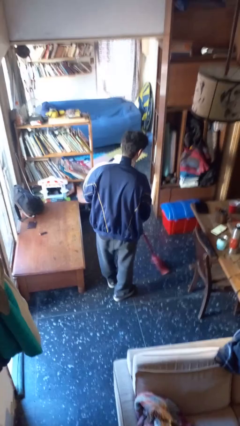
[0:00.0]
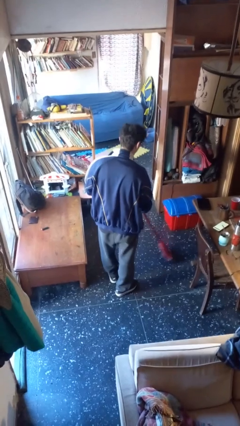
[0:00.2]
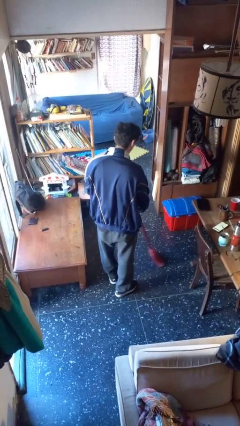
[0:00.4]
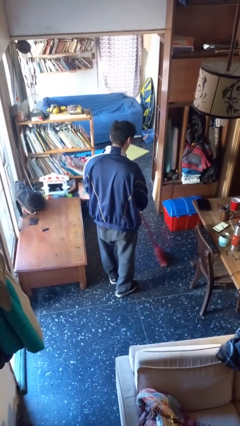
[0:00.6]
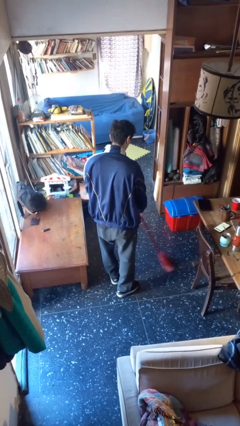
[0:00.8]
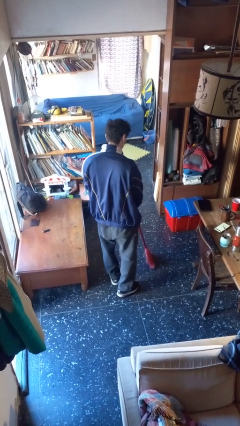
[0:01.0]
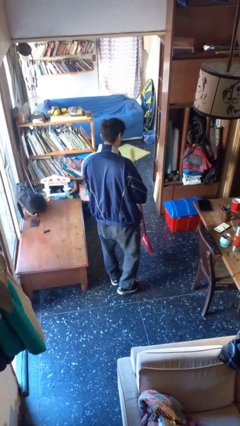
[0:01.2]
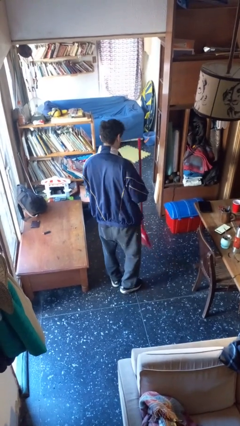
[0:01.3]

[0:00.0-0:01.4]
person sweeps floor

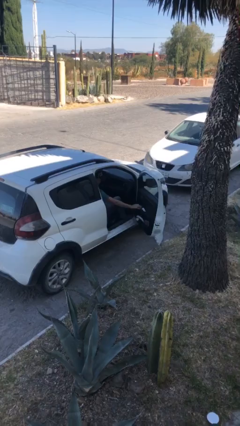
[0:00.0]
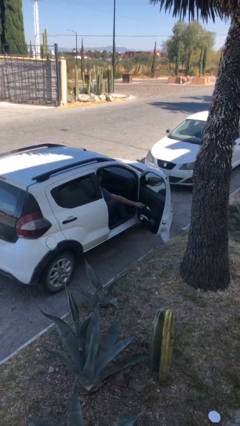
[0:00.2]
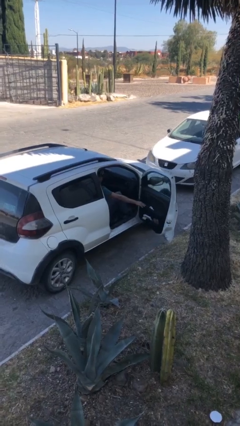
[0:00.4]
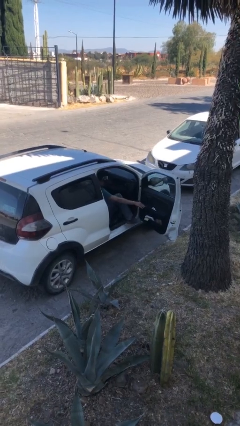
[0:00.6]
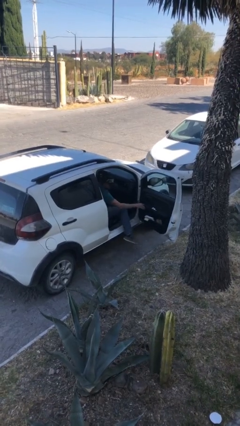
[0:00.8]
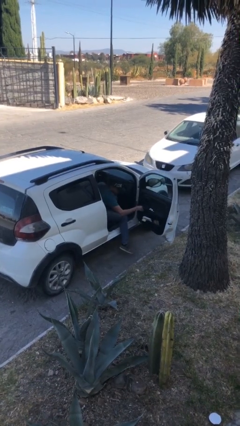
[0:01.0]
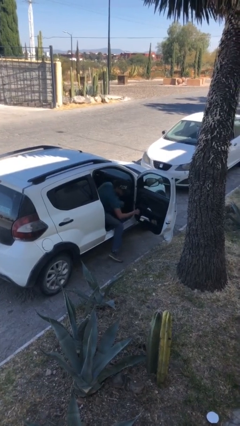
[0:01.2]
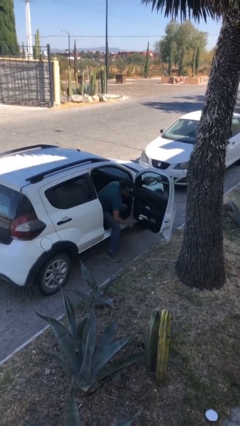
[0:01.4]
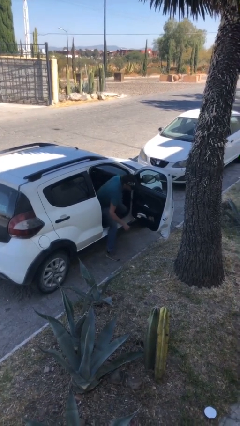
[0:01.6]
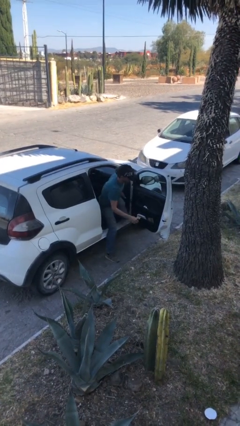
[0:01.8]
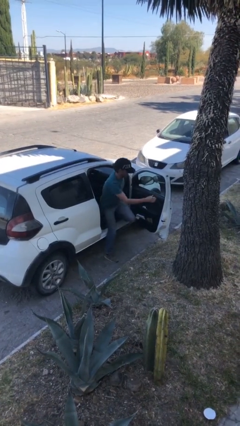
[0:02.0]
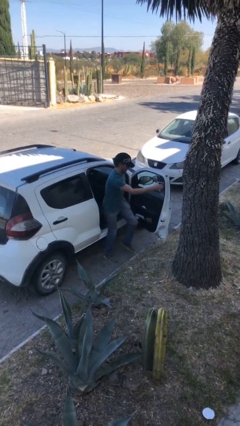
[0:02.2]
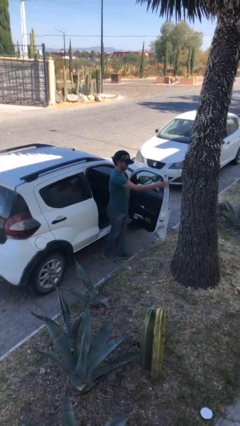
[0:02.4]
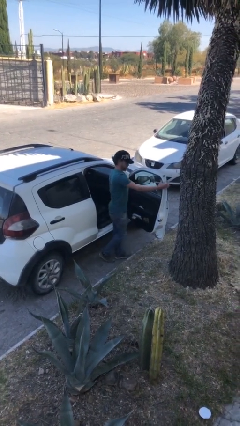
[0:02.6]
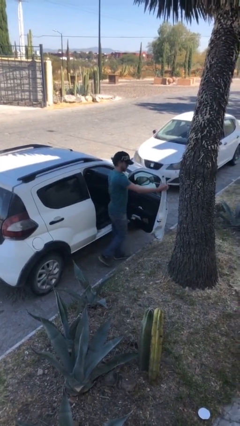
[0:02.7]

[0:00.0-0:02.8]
person exits car

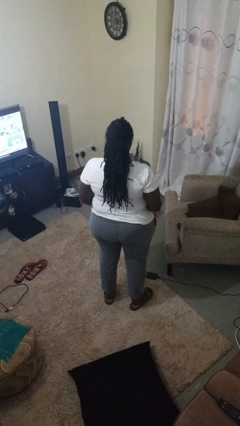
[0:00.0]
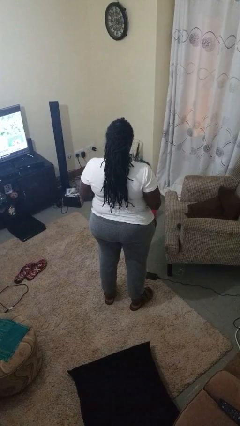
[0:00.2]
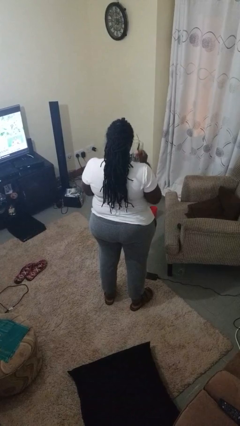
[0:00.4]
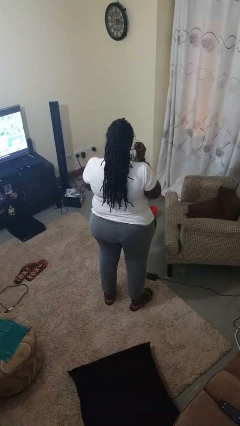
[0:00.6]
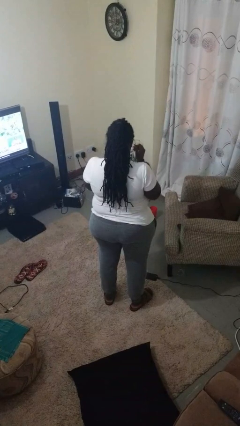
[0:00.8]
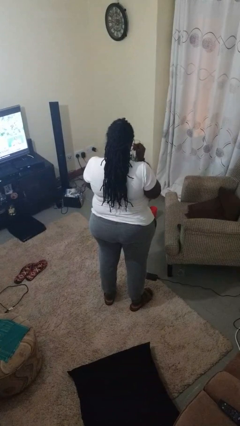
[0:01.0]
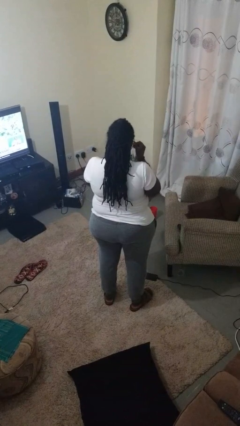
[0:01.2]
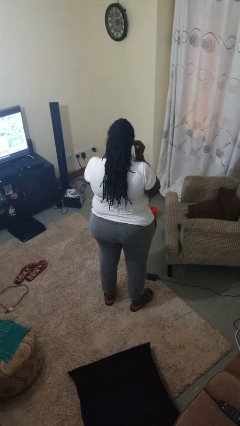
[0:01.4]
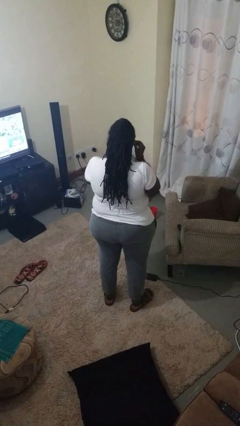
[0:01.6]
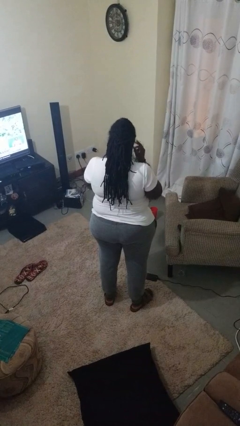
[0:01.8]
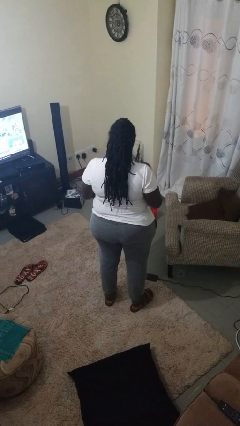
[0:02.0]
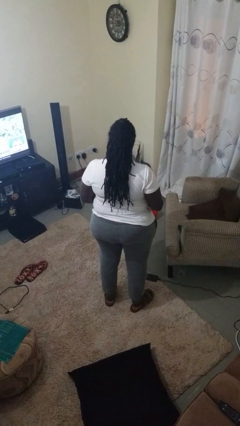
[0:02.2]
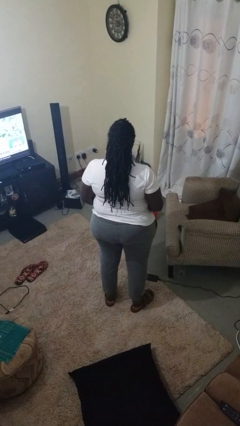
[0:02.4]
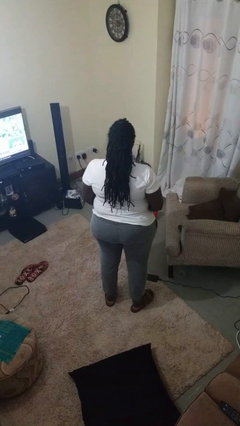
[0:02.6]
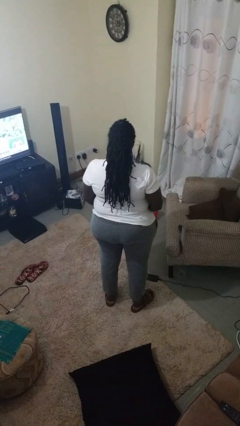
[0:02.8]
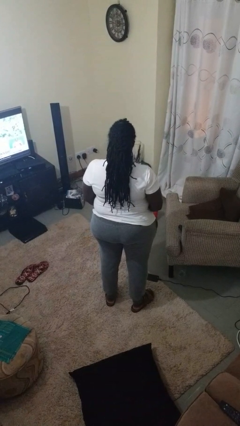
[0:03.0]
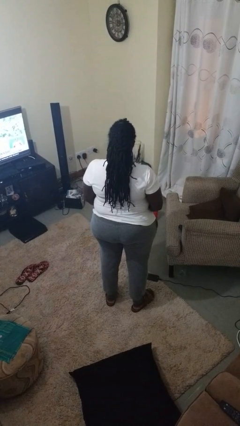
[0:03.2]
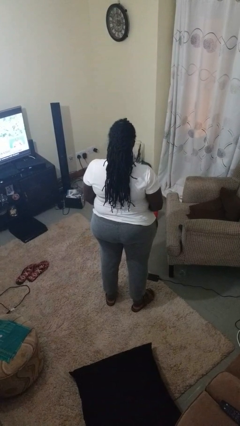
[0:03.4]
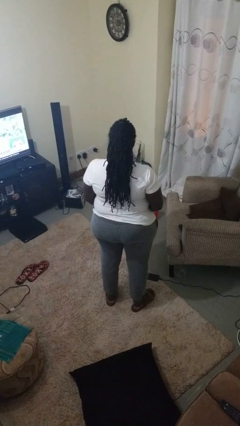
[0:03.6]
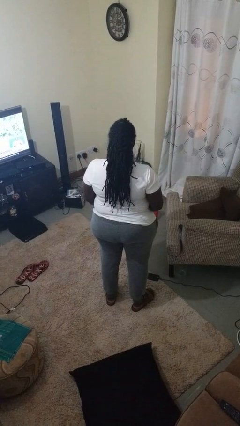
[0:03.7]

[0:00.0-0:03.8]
person puts on sunglasses

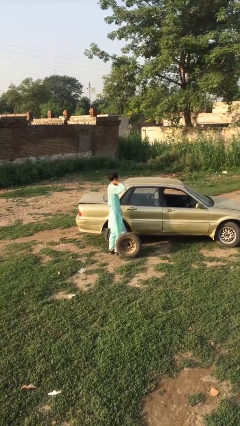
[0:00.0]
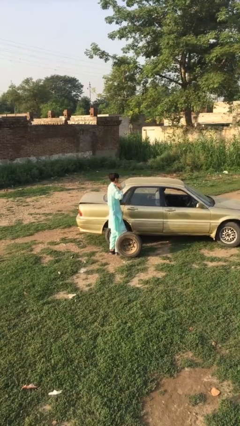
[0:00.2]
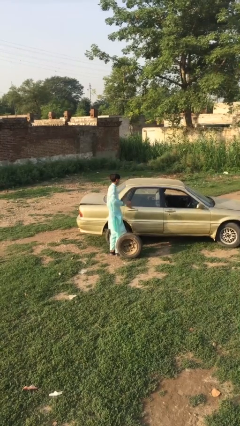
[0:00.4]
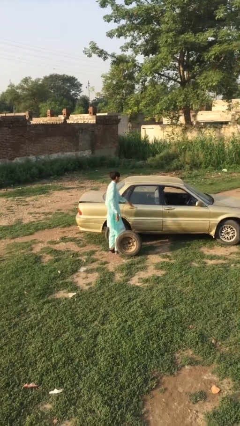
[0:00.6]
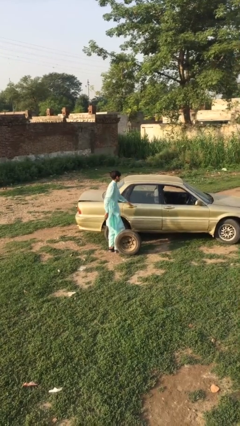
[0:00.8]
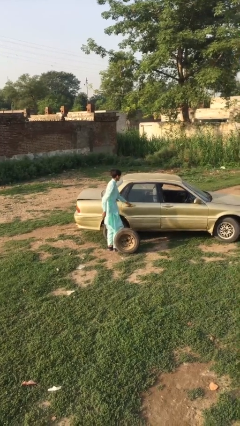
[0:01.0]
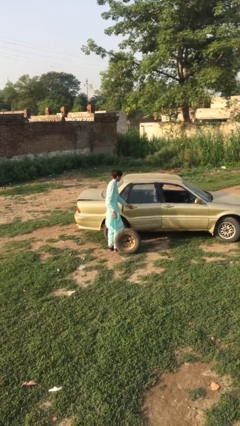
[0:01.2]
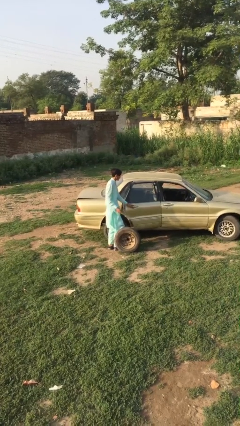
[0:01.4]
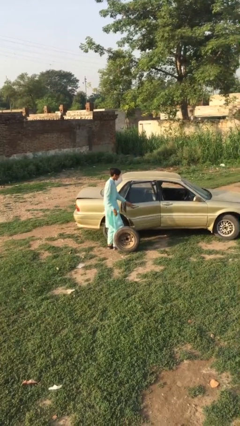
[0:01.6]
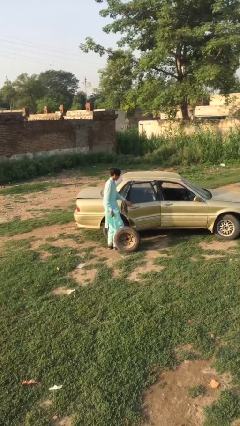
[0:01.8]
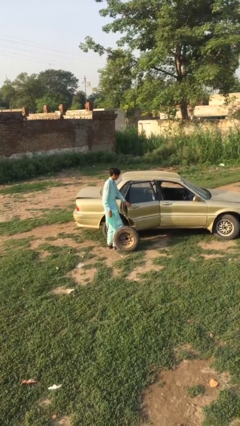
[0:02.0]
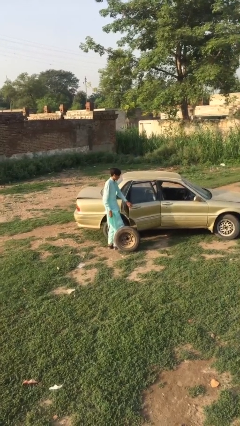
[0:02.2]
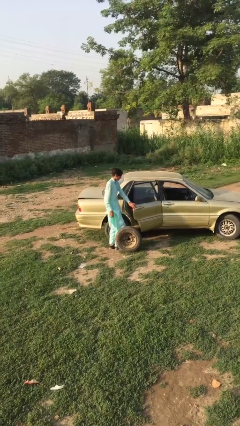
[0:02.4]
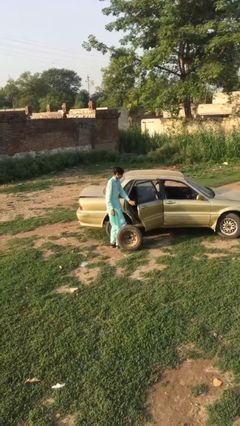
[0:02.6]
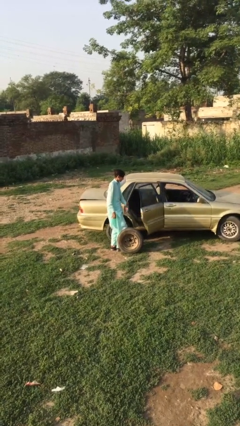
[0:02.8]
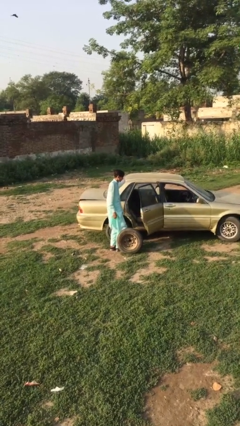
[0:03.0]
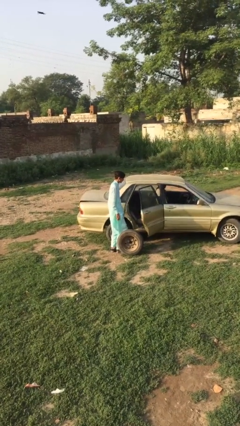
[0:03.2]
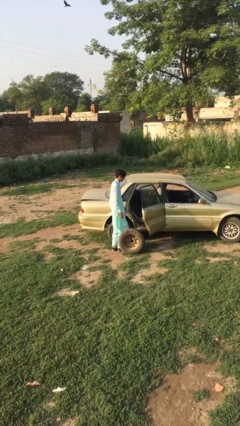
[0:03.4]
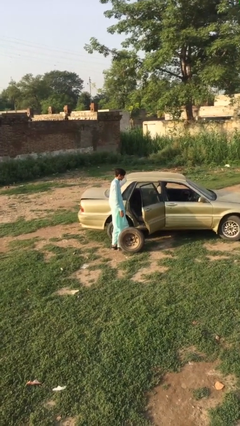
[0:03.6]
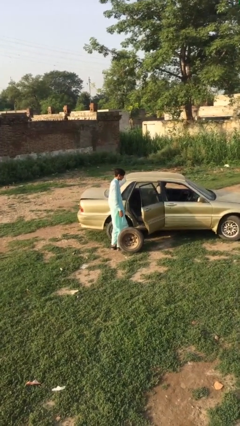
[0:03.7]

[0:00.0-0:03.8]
person opens car door

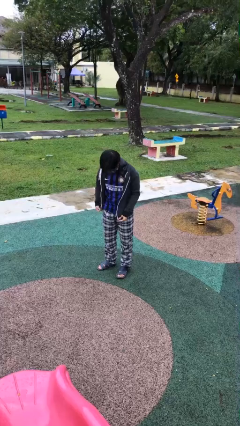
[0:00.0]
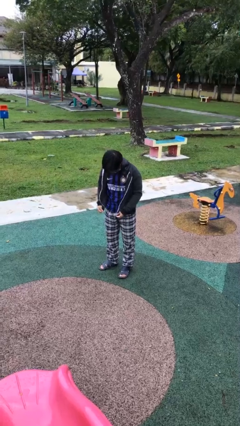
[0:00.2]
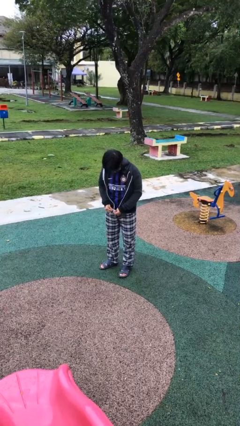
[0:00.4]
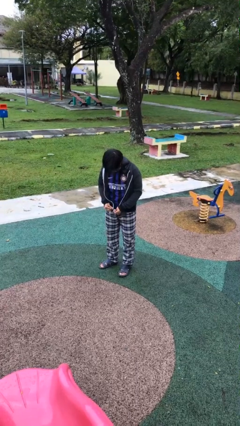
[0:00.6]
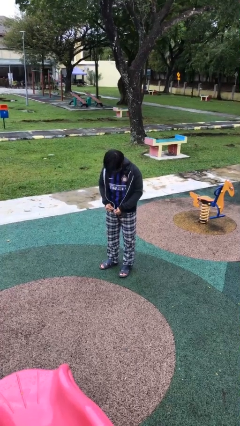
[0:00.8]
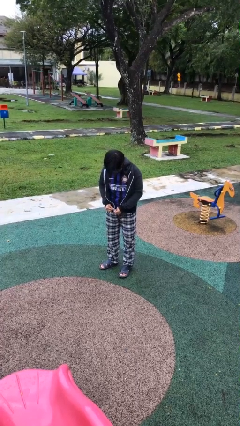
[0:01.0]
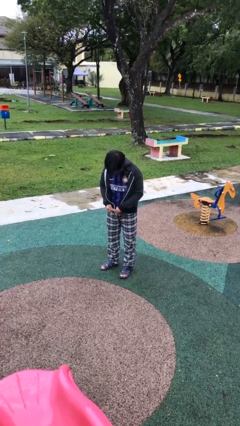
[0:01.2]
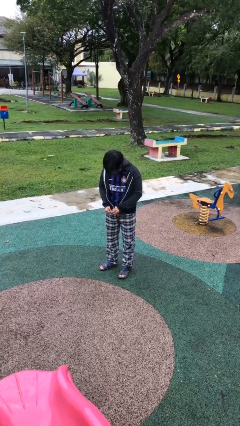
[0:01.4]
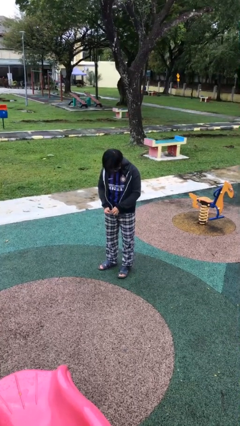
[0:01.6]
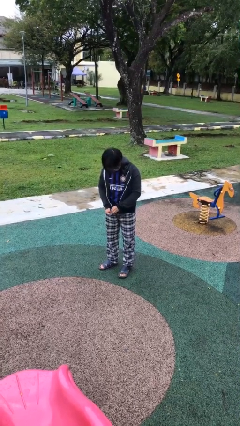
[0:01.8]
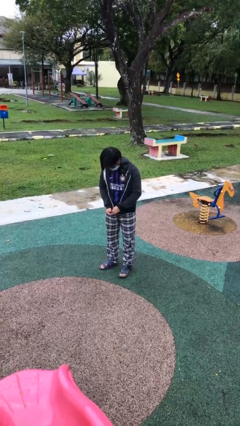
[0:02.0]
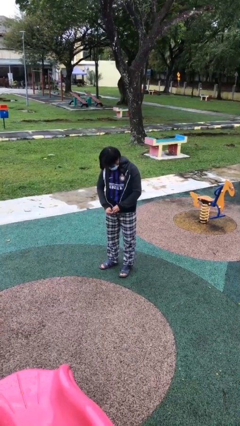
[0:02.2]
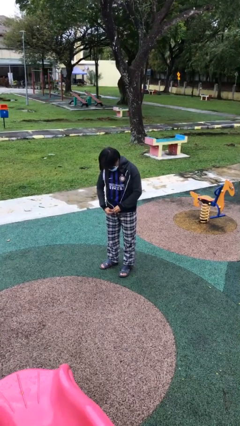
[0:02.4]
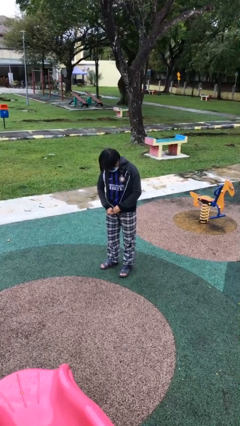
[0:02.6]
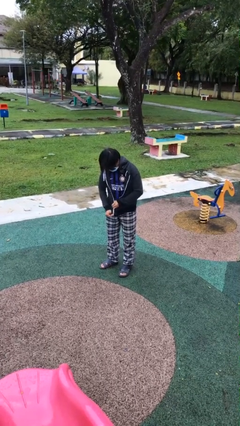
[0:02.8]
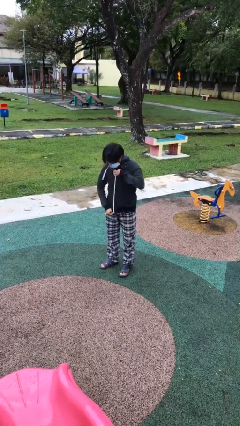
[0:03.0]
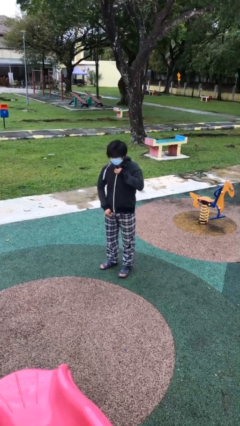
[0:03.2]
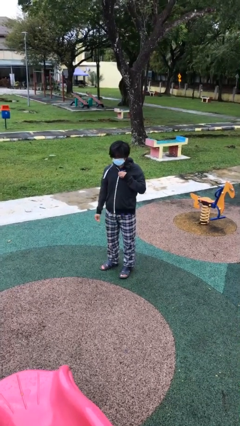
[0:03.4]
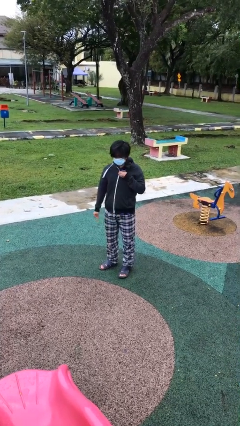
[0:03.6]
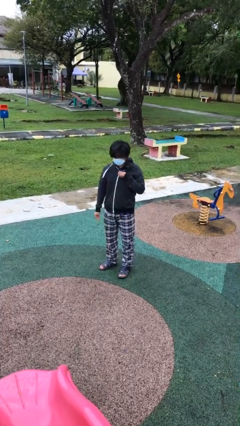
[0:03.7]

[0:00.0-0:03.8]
person zips up jacket

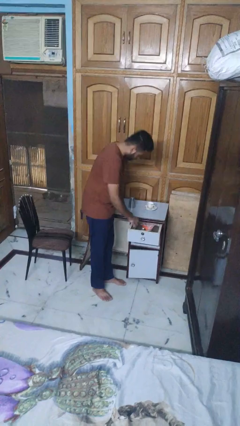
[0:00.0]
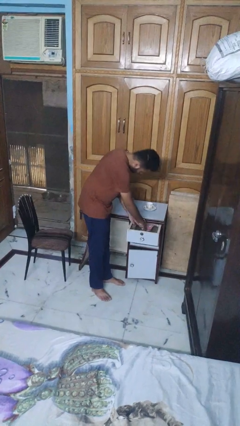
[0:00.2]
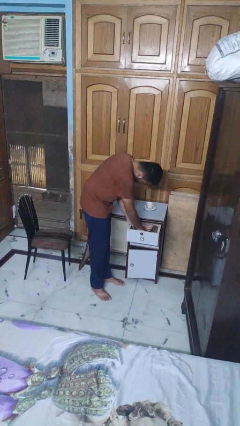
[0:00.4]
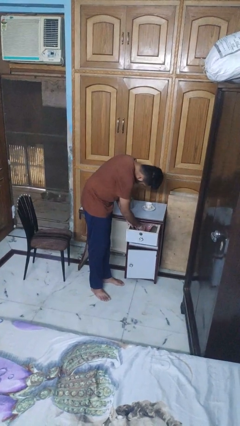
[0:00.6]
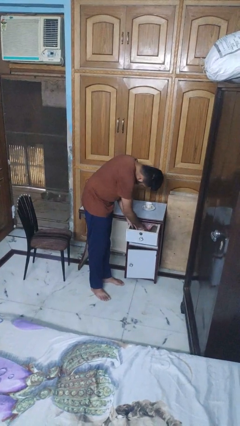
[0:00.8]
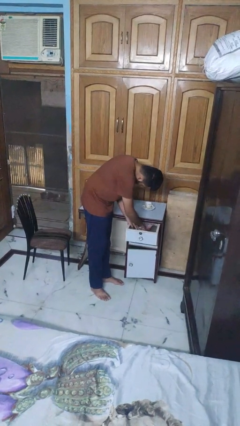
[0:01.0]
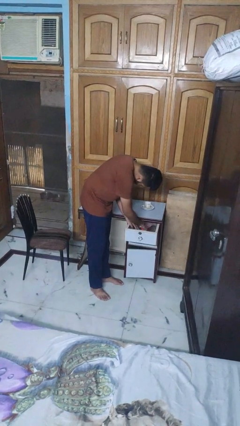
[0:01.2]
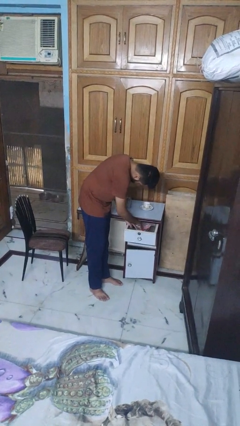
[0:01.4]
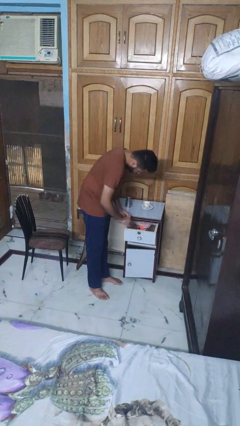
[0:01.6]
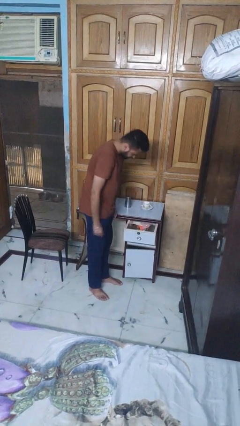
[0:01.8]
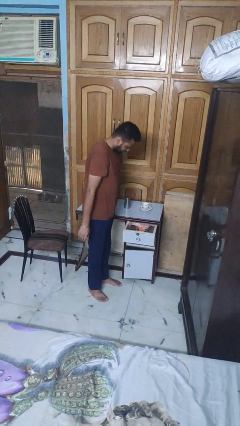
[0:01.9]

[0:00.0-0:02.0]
person searches in kitchen drawer
